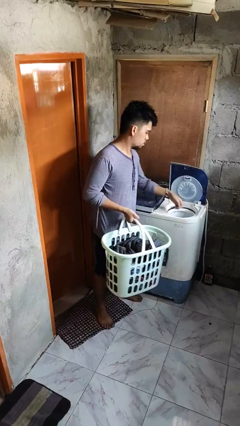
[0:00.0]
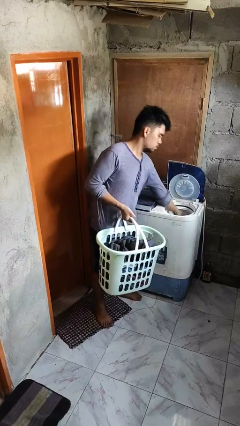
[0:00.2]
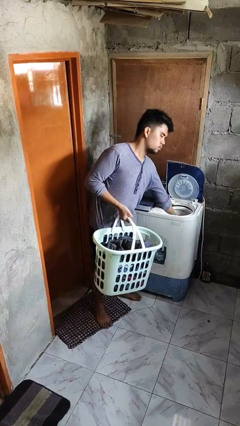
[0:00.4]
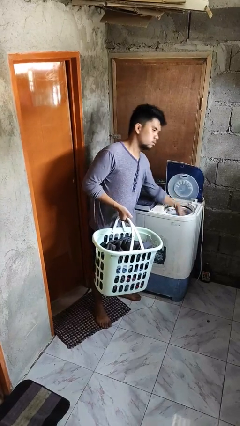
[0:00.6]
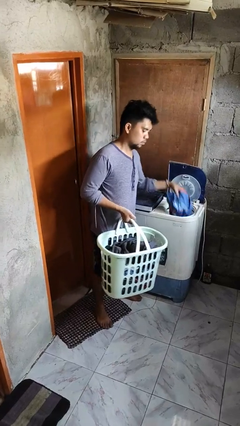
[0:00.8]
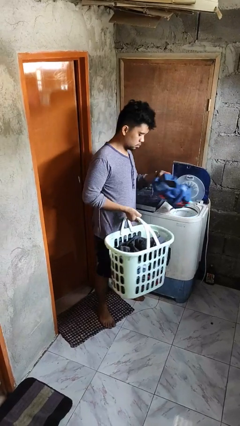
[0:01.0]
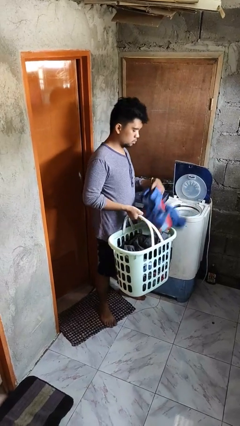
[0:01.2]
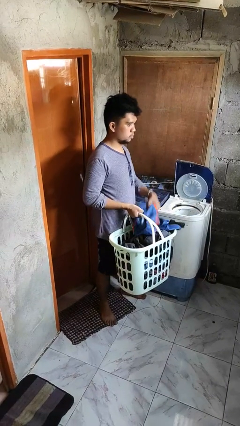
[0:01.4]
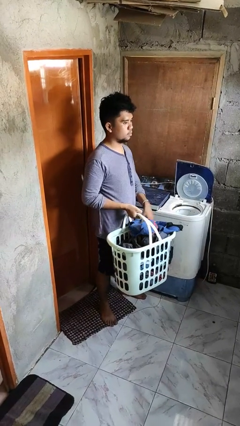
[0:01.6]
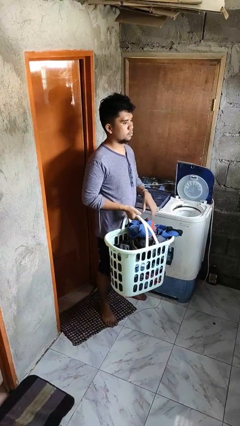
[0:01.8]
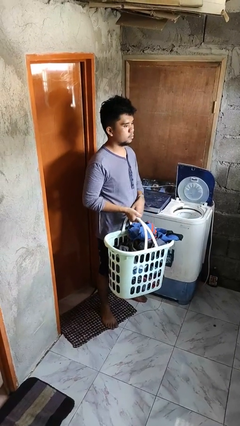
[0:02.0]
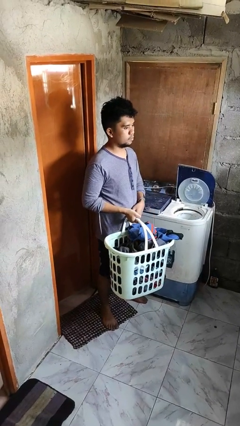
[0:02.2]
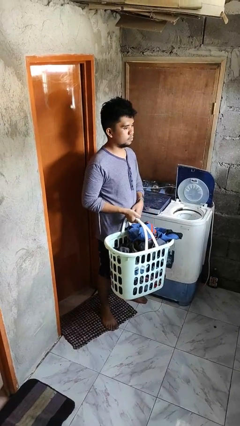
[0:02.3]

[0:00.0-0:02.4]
person unloads dryer

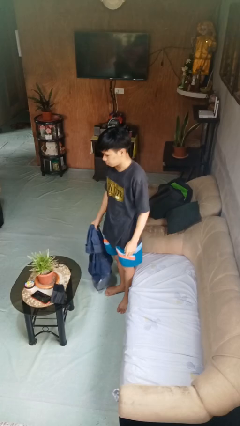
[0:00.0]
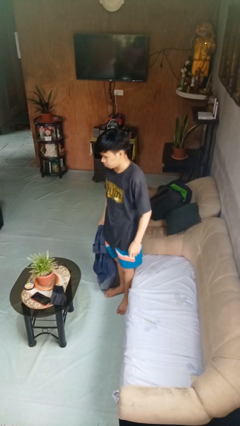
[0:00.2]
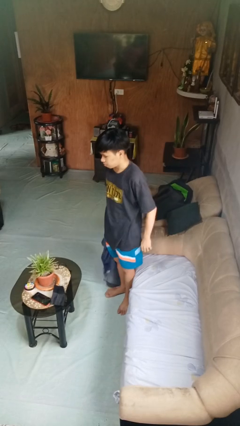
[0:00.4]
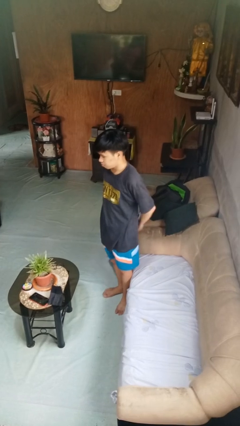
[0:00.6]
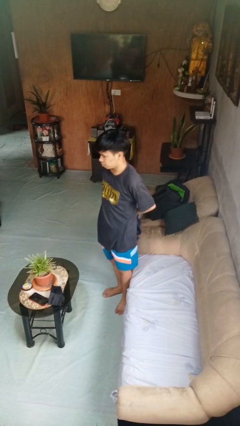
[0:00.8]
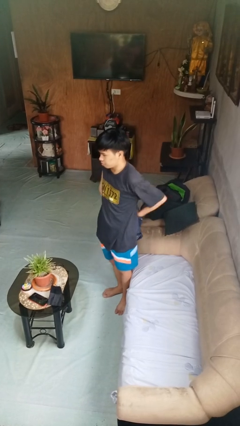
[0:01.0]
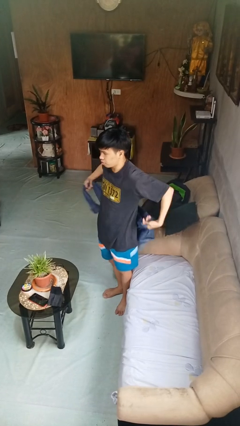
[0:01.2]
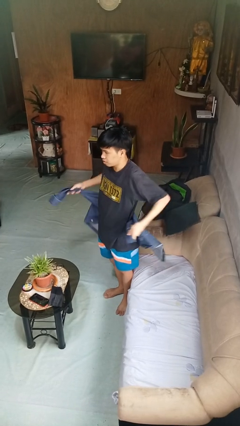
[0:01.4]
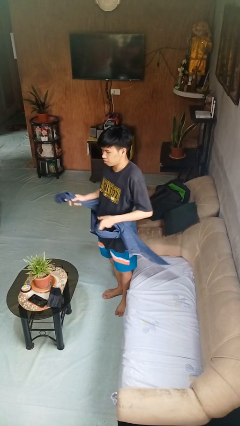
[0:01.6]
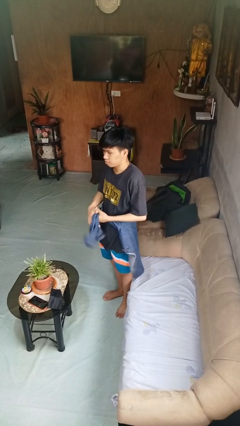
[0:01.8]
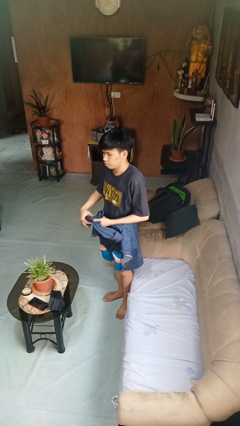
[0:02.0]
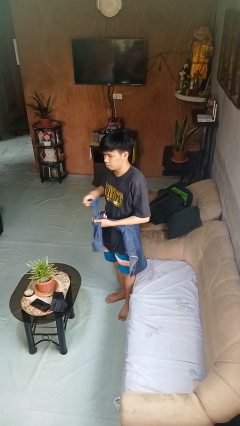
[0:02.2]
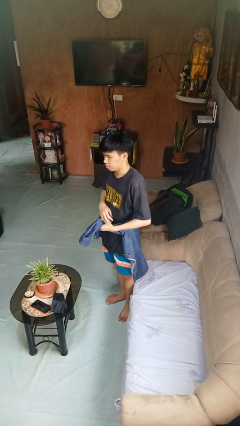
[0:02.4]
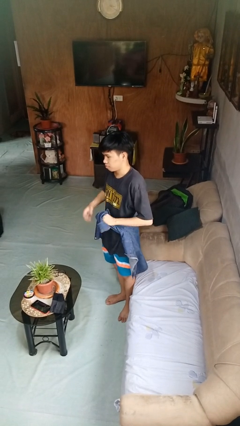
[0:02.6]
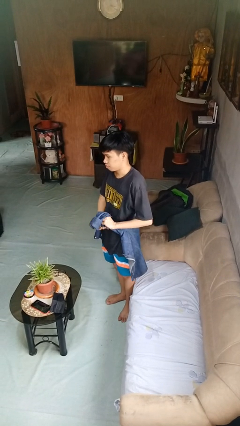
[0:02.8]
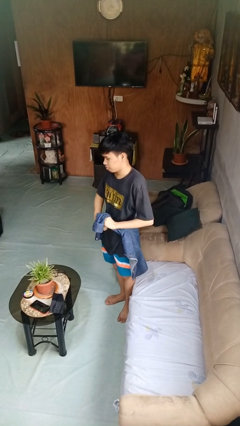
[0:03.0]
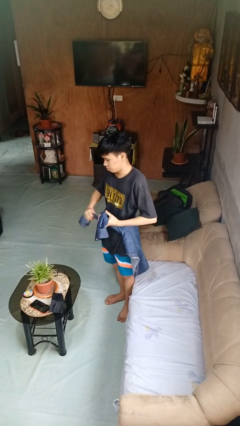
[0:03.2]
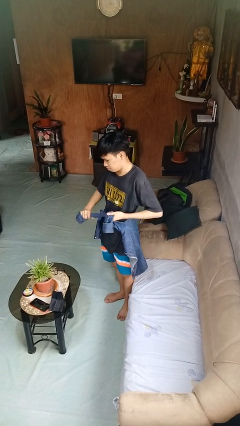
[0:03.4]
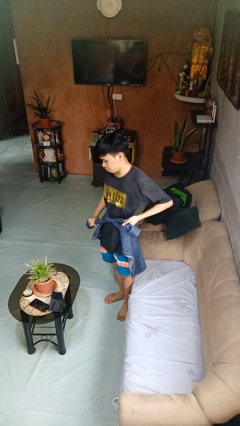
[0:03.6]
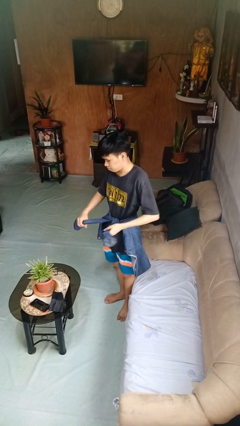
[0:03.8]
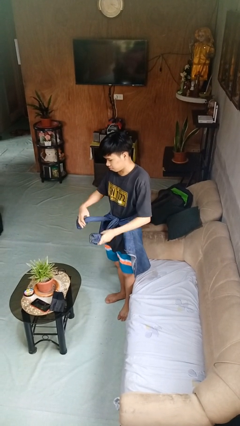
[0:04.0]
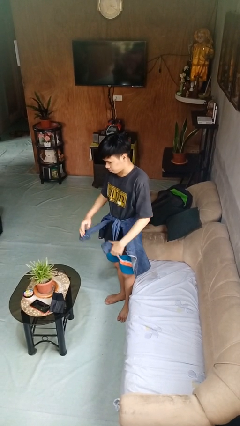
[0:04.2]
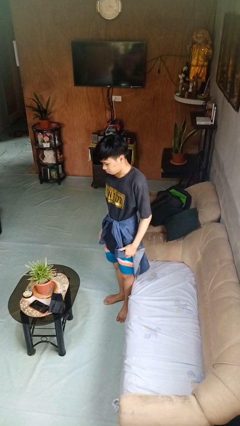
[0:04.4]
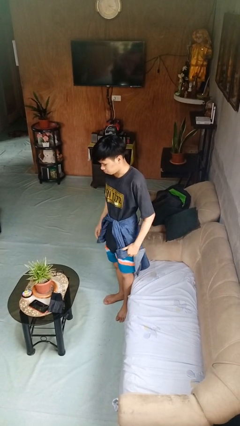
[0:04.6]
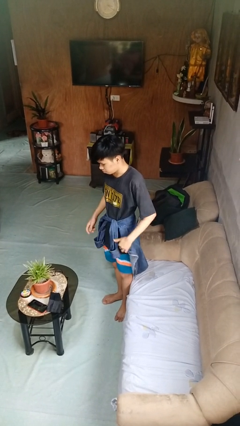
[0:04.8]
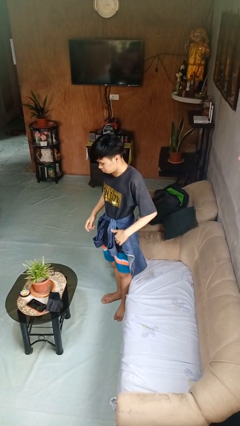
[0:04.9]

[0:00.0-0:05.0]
person ties jacket around waist

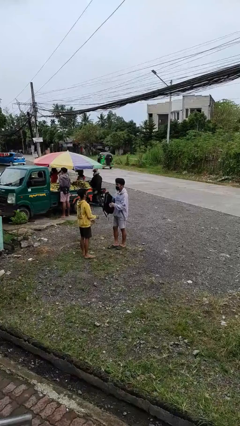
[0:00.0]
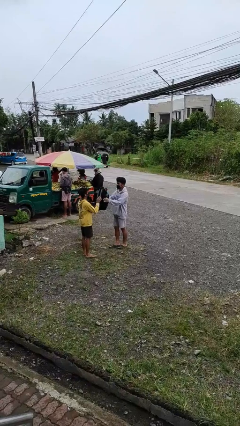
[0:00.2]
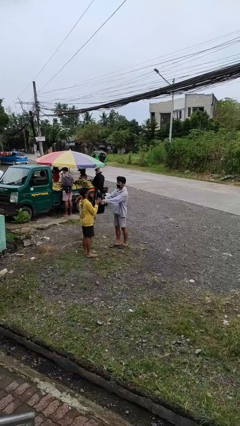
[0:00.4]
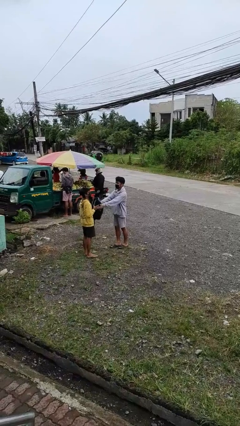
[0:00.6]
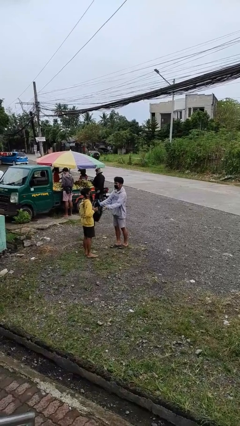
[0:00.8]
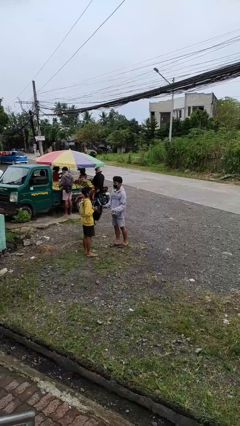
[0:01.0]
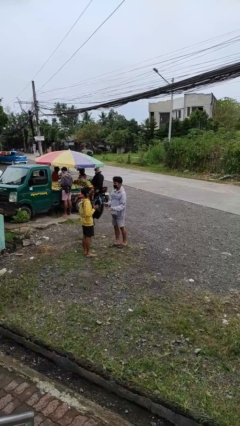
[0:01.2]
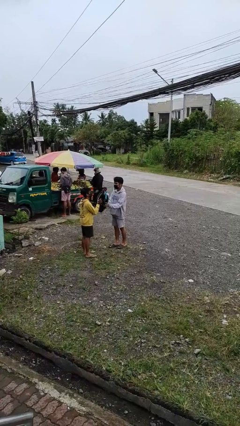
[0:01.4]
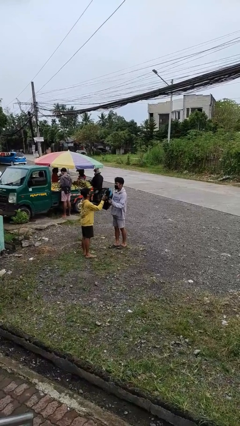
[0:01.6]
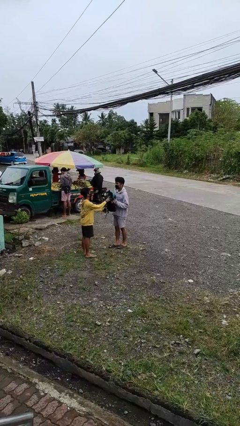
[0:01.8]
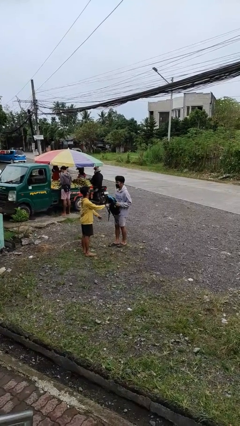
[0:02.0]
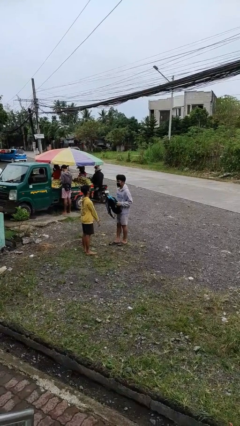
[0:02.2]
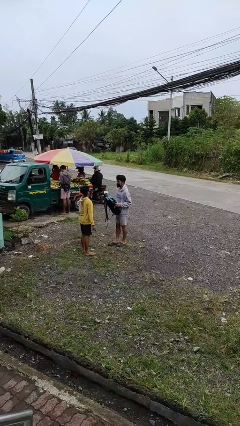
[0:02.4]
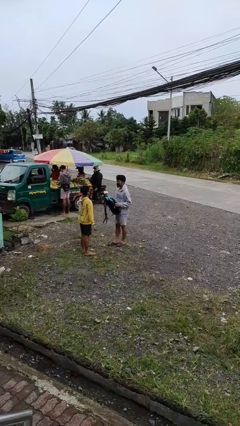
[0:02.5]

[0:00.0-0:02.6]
person transfers object to person

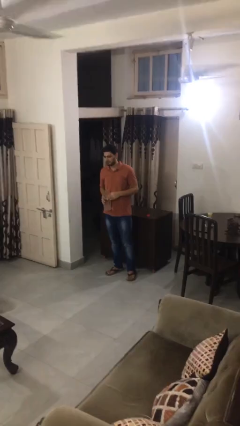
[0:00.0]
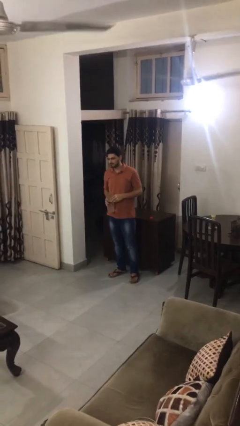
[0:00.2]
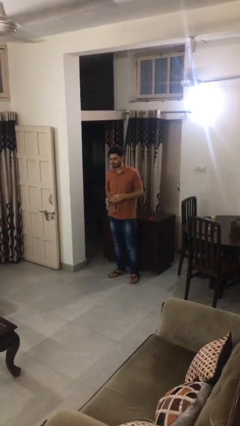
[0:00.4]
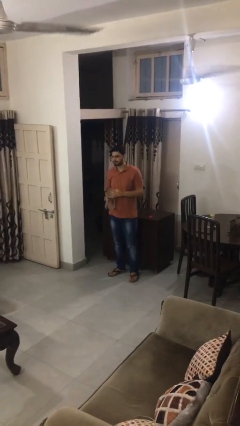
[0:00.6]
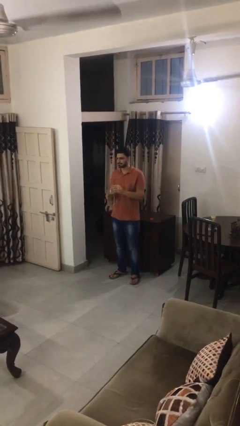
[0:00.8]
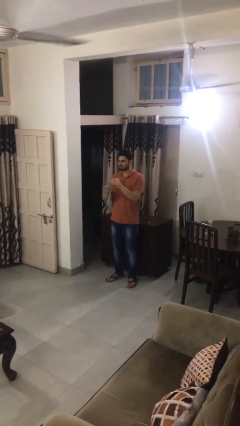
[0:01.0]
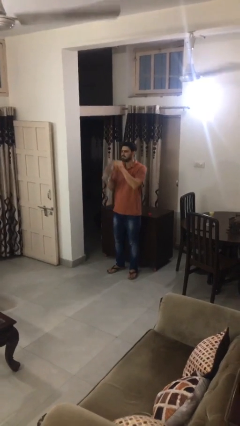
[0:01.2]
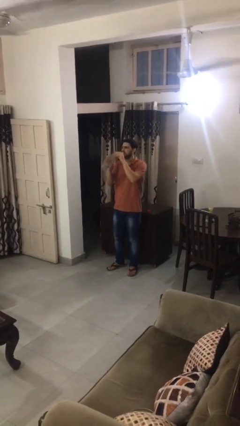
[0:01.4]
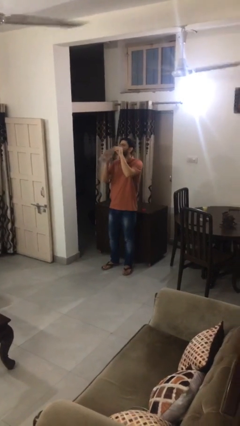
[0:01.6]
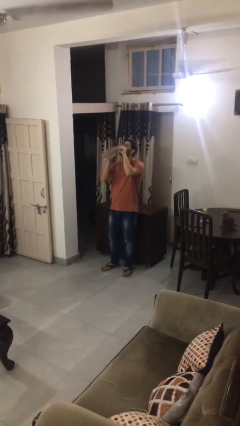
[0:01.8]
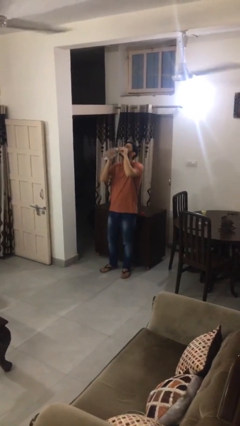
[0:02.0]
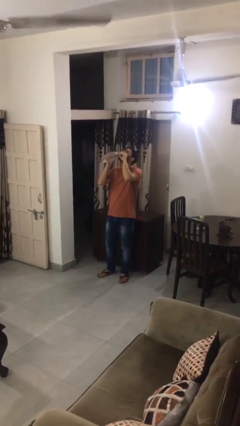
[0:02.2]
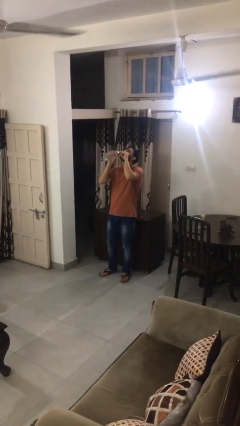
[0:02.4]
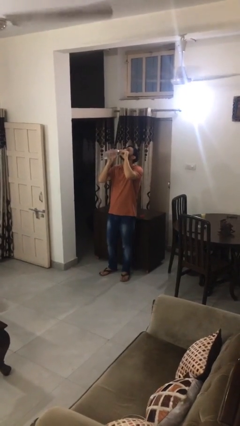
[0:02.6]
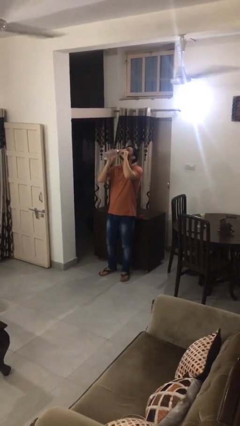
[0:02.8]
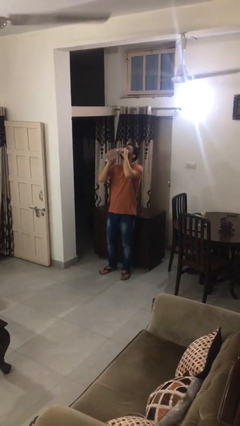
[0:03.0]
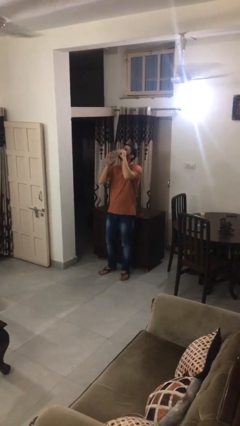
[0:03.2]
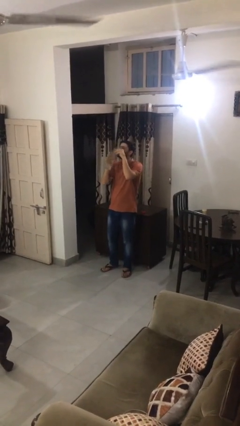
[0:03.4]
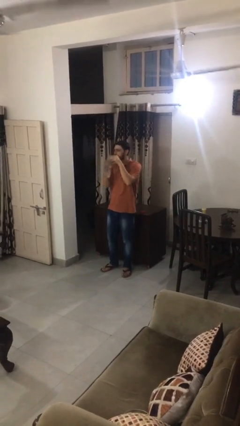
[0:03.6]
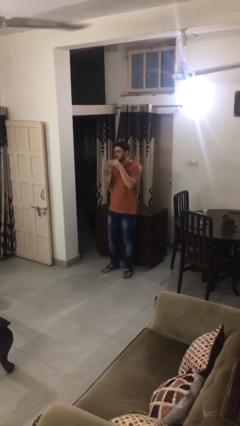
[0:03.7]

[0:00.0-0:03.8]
person drinks from bottle

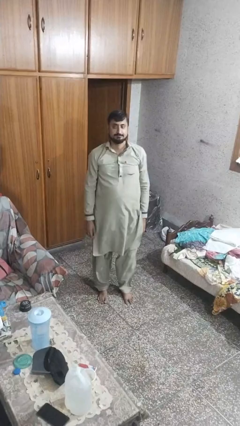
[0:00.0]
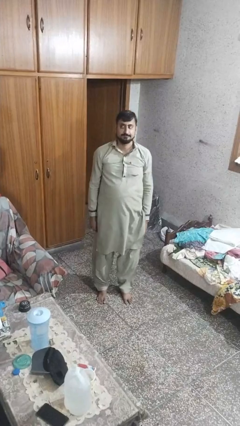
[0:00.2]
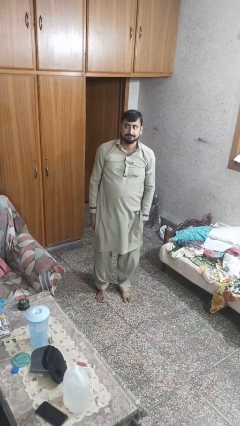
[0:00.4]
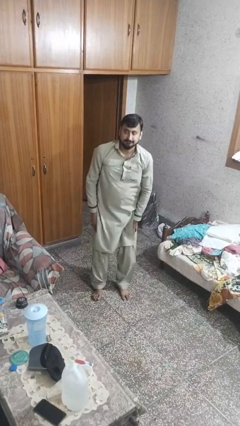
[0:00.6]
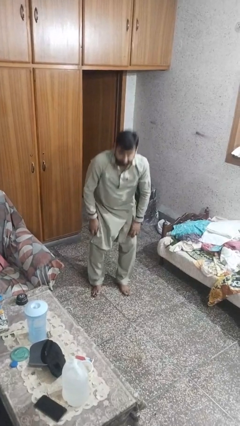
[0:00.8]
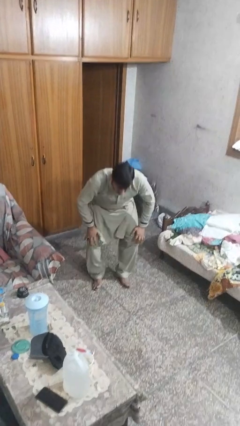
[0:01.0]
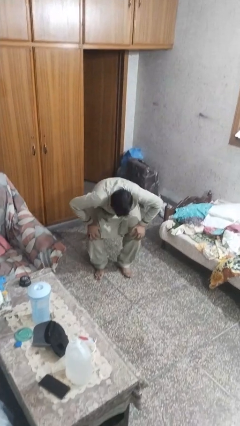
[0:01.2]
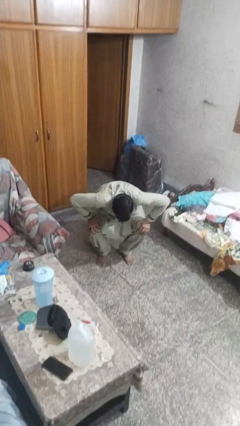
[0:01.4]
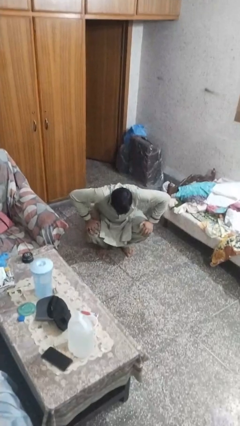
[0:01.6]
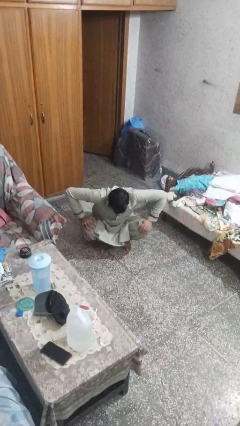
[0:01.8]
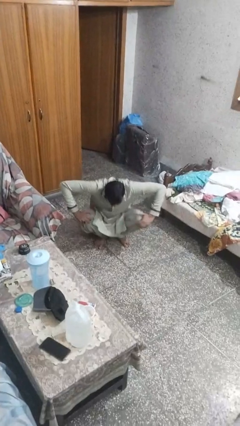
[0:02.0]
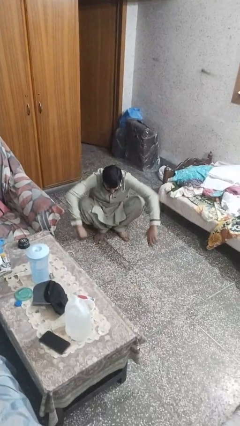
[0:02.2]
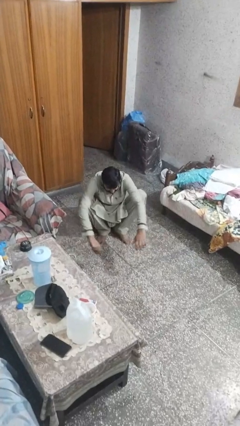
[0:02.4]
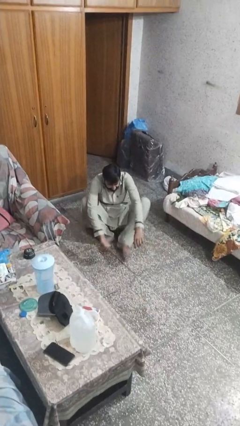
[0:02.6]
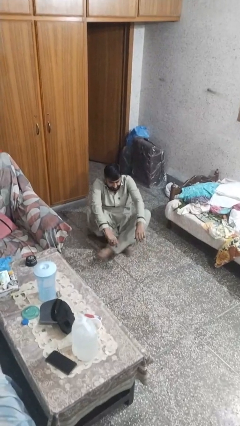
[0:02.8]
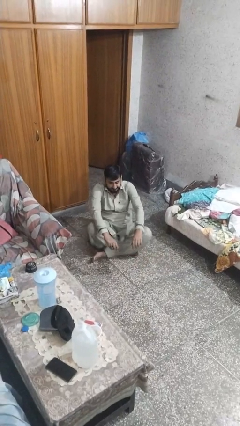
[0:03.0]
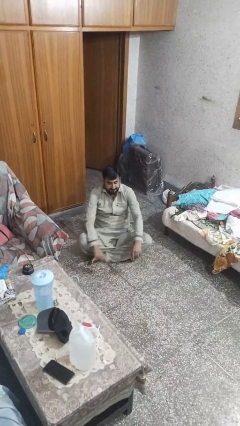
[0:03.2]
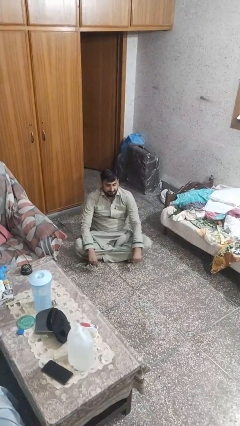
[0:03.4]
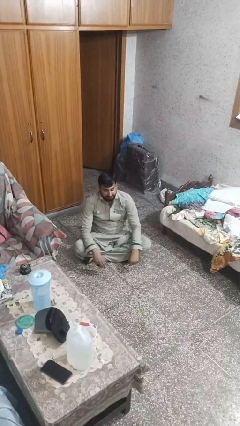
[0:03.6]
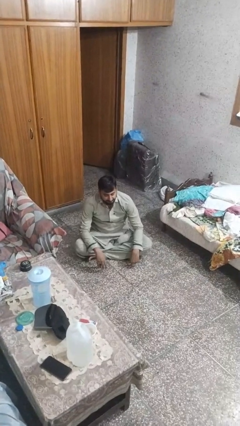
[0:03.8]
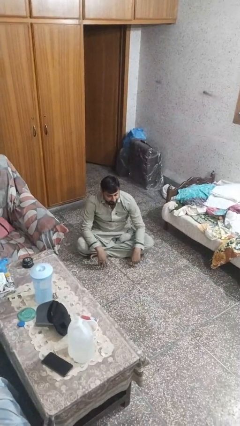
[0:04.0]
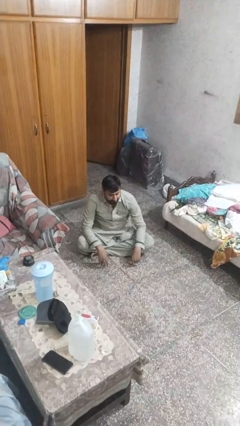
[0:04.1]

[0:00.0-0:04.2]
person sits crisscross
